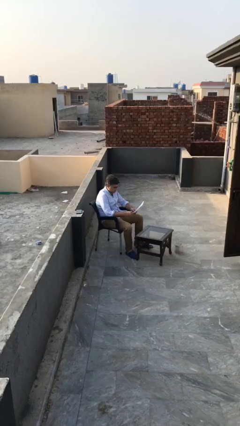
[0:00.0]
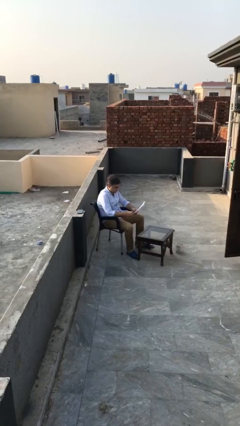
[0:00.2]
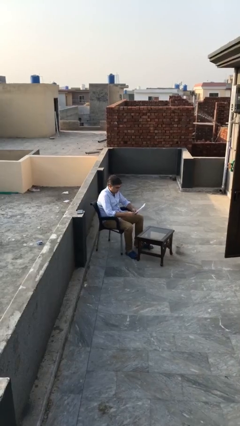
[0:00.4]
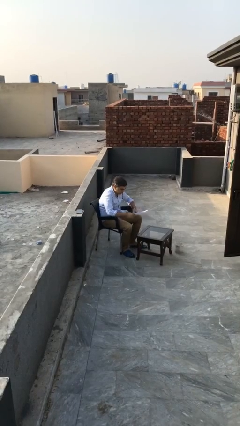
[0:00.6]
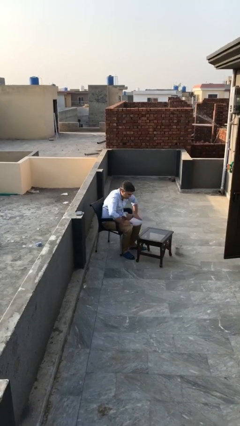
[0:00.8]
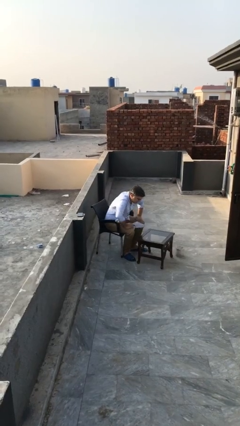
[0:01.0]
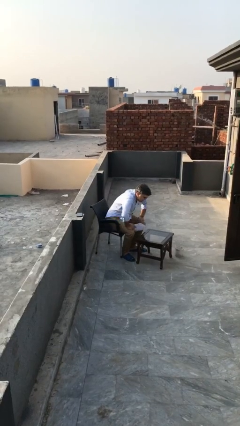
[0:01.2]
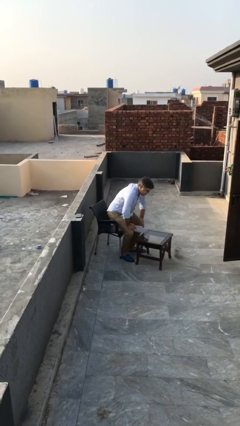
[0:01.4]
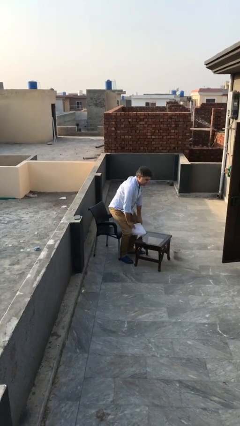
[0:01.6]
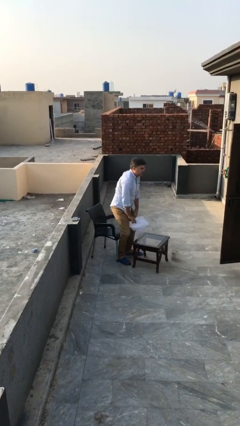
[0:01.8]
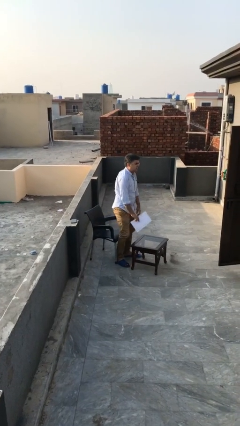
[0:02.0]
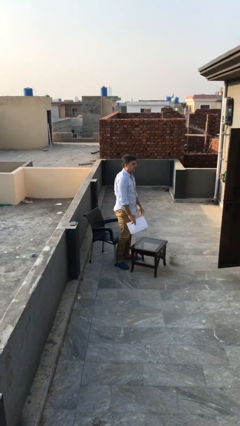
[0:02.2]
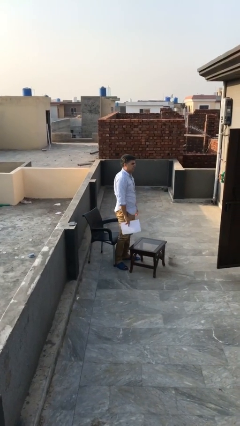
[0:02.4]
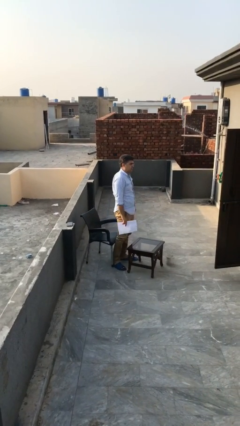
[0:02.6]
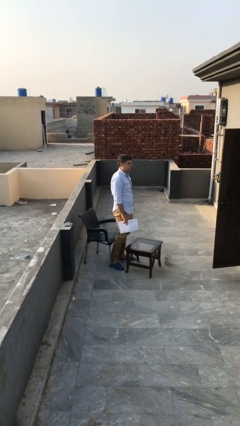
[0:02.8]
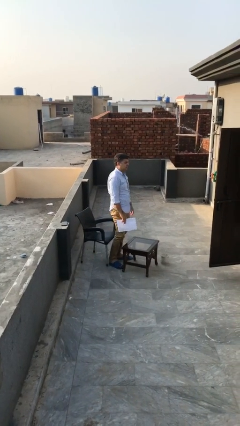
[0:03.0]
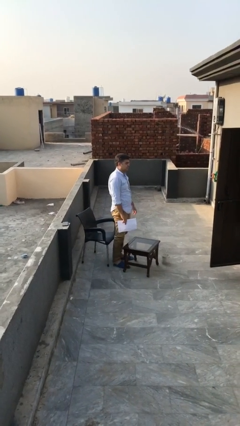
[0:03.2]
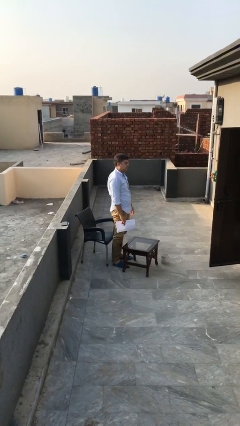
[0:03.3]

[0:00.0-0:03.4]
person stands up

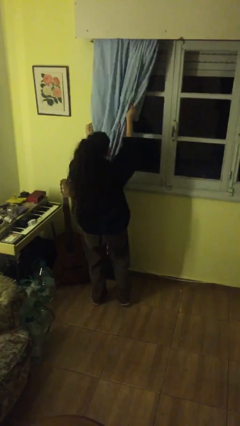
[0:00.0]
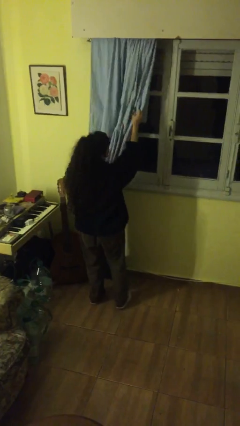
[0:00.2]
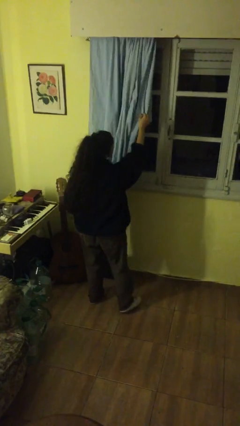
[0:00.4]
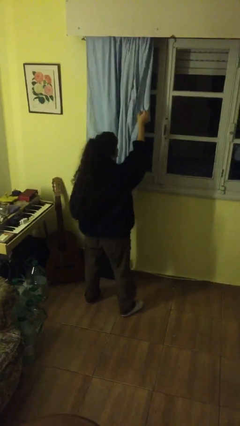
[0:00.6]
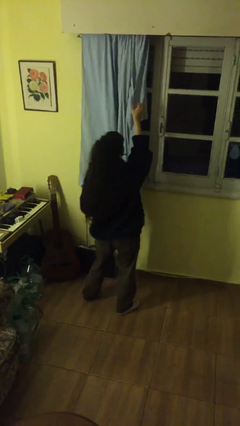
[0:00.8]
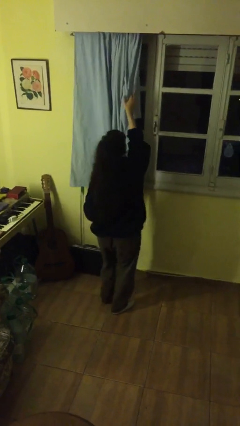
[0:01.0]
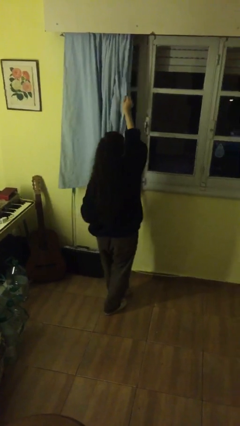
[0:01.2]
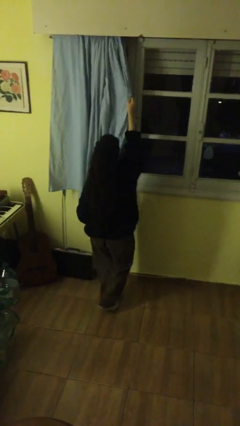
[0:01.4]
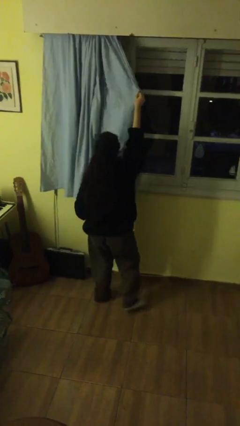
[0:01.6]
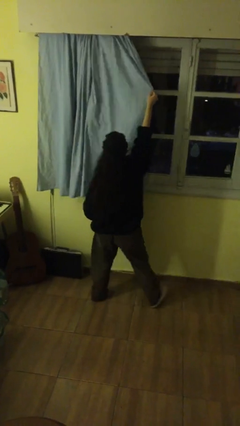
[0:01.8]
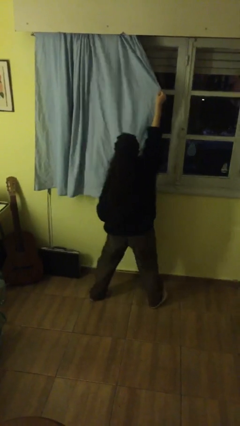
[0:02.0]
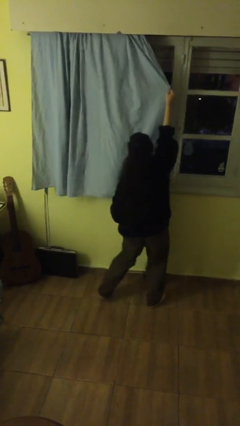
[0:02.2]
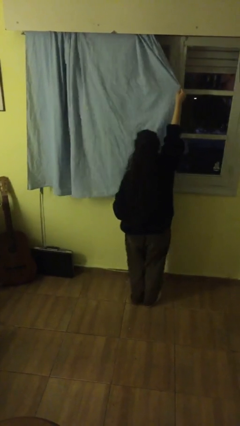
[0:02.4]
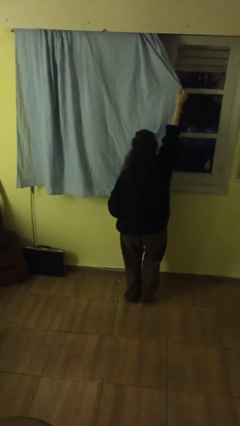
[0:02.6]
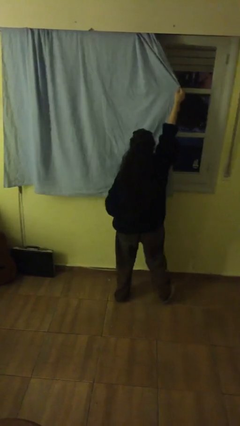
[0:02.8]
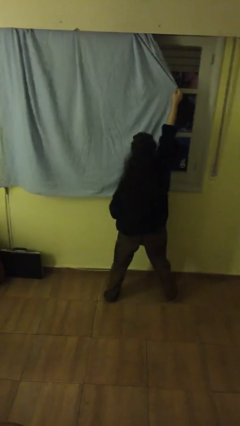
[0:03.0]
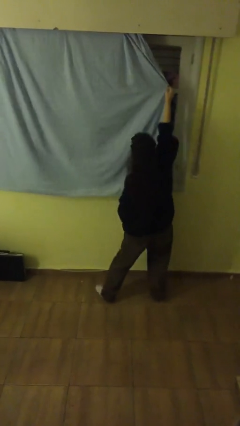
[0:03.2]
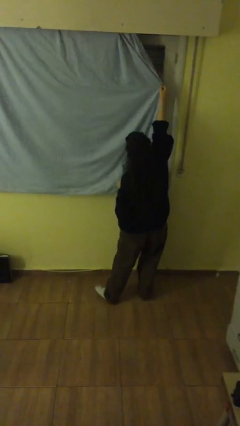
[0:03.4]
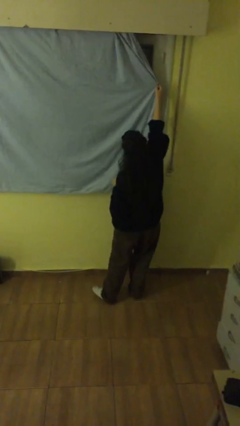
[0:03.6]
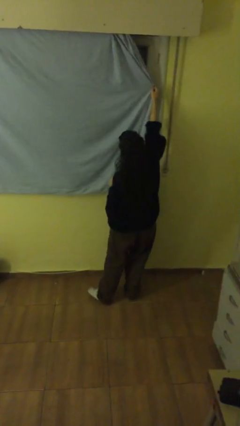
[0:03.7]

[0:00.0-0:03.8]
person closes curtains

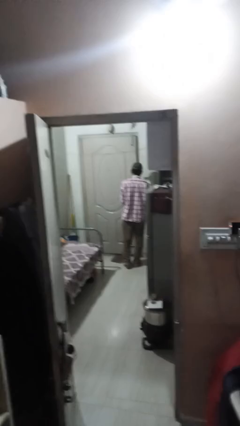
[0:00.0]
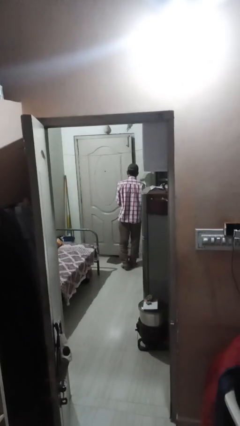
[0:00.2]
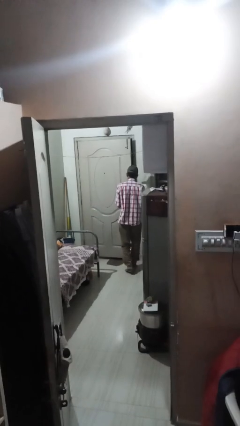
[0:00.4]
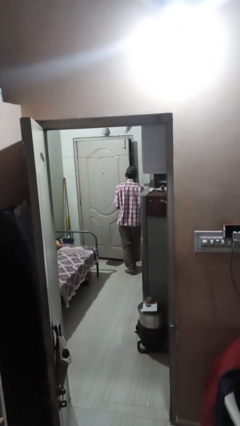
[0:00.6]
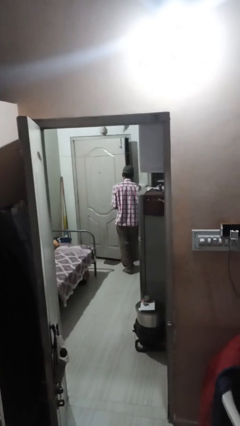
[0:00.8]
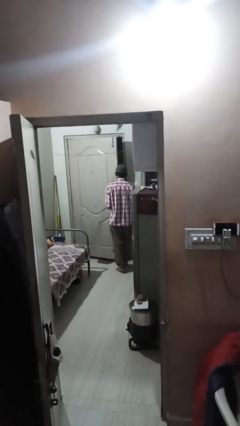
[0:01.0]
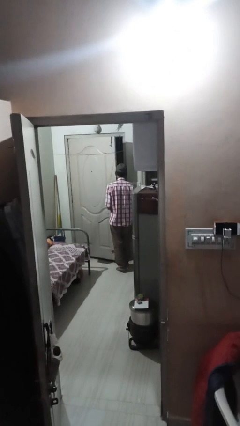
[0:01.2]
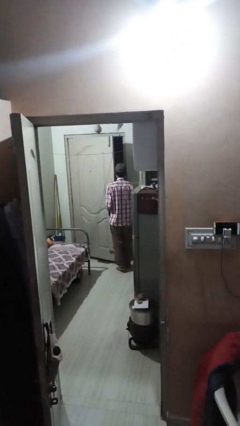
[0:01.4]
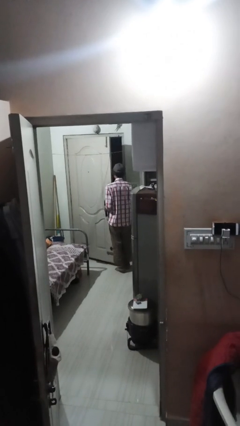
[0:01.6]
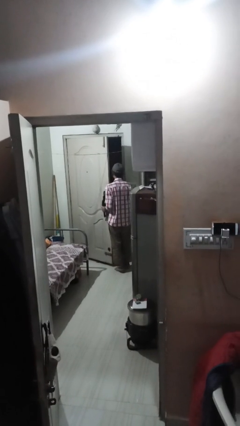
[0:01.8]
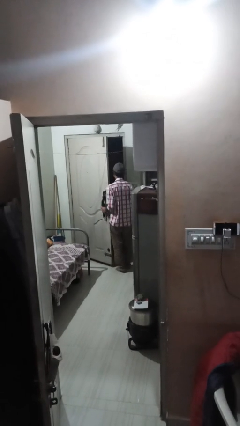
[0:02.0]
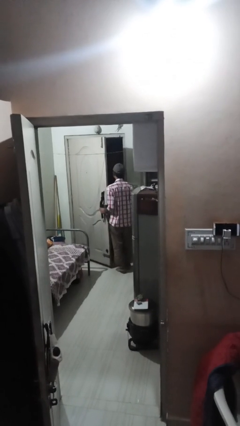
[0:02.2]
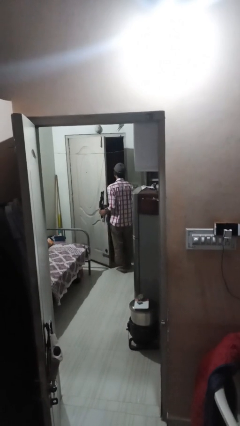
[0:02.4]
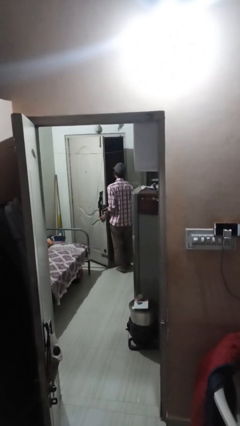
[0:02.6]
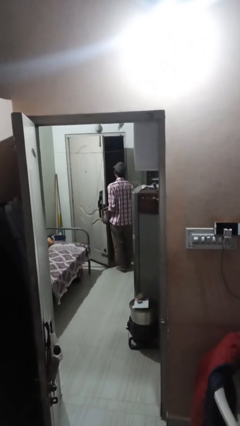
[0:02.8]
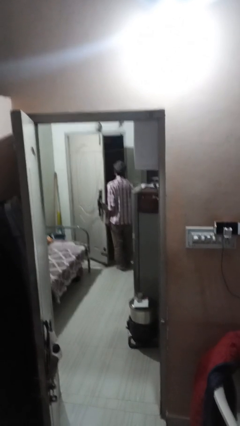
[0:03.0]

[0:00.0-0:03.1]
person opens facility door

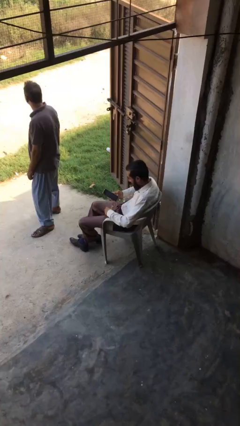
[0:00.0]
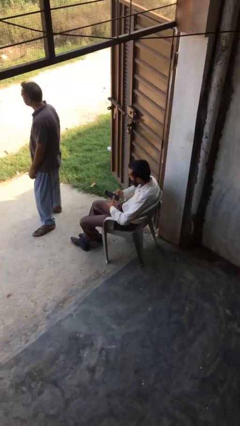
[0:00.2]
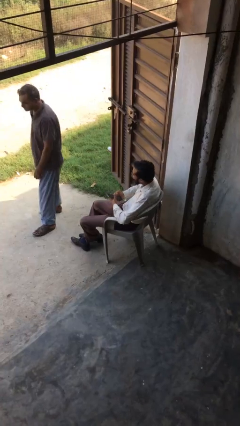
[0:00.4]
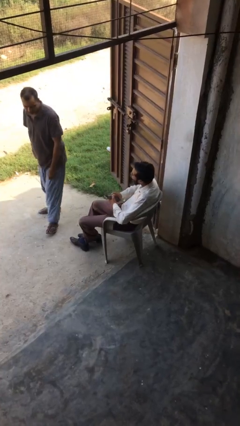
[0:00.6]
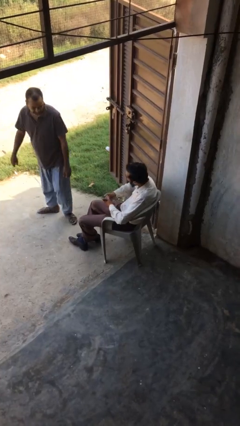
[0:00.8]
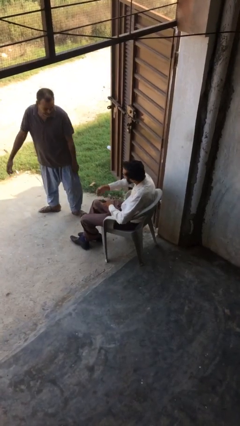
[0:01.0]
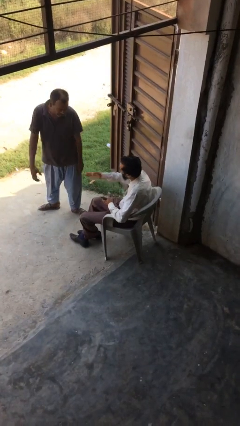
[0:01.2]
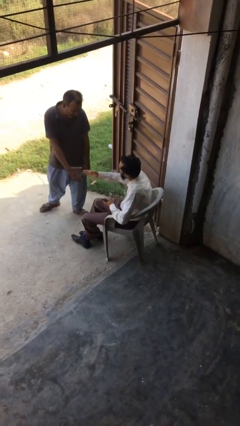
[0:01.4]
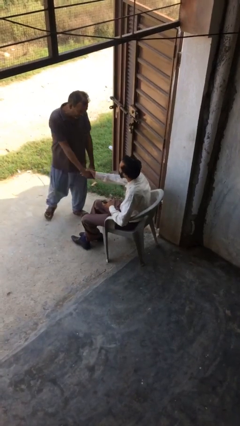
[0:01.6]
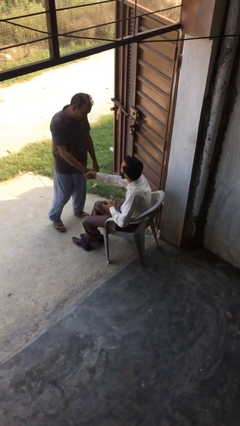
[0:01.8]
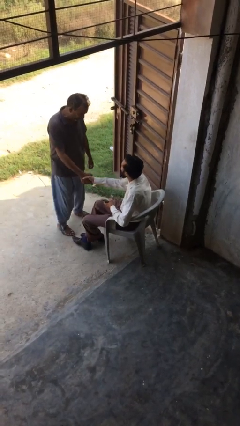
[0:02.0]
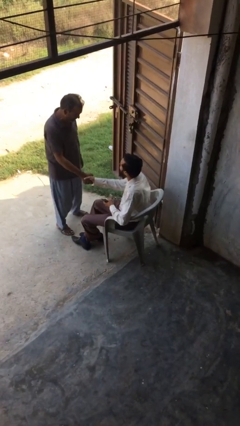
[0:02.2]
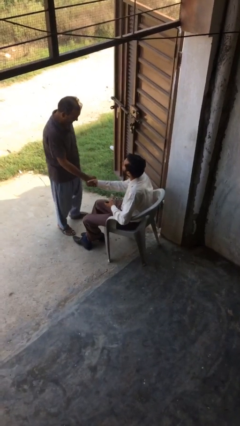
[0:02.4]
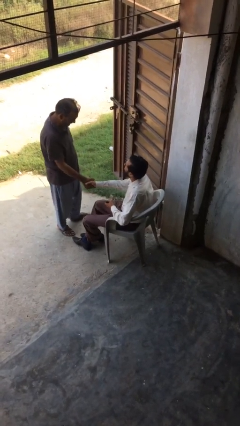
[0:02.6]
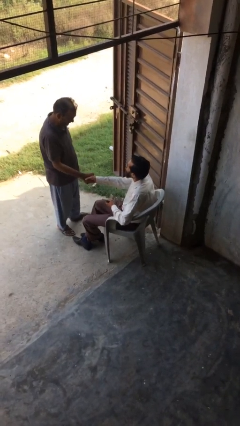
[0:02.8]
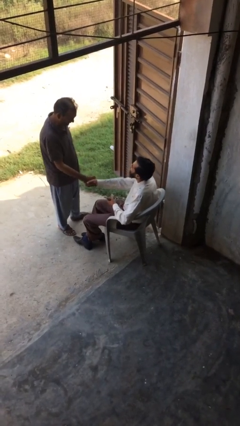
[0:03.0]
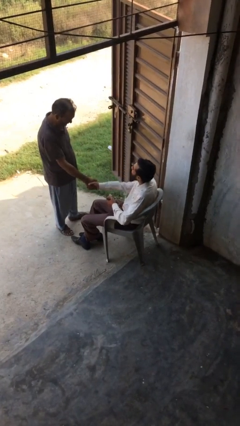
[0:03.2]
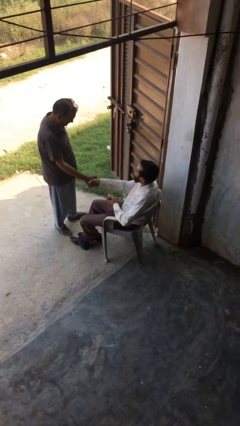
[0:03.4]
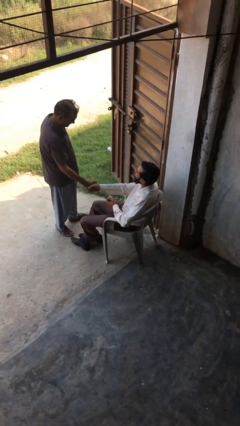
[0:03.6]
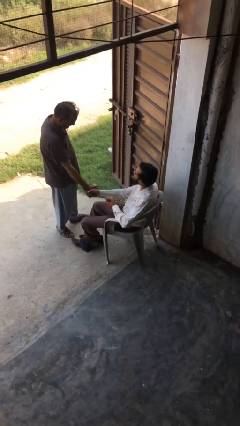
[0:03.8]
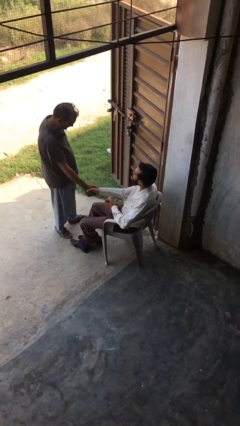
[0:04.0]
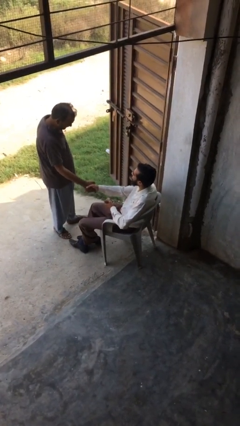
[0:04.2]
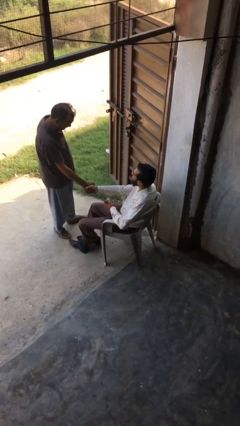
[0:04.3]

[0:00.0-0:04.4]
person shakes hand

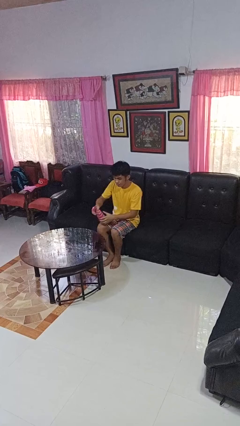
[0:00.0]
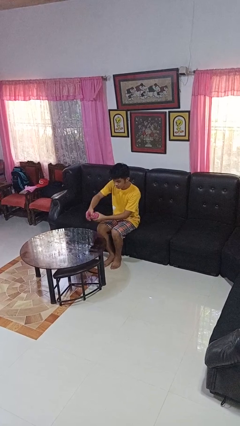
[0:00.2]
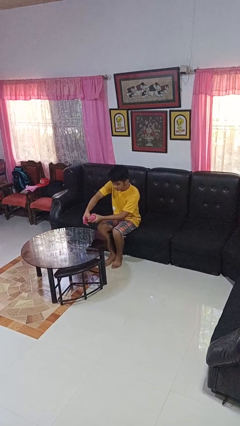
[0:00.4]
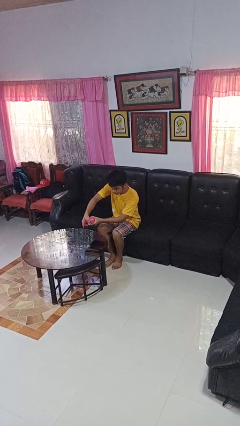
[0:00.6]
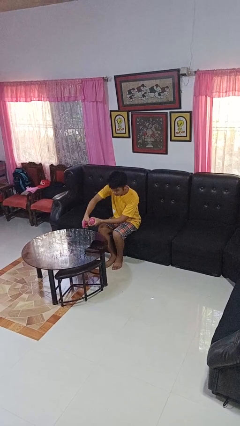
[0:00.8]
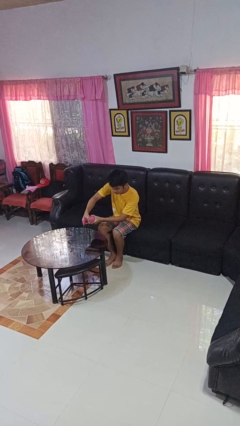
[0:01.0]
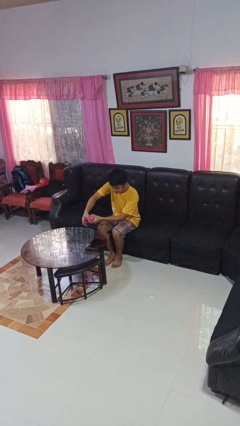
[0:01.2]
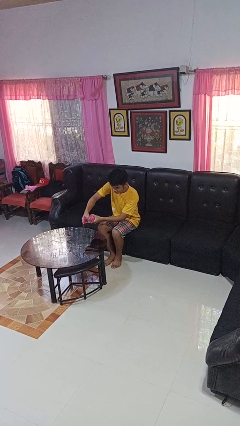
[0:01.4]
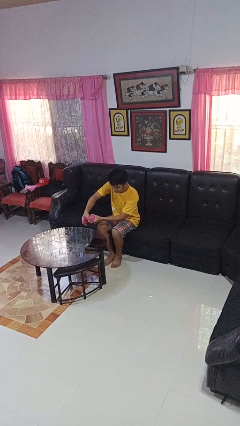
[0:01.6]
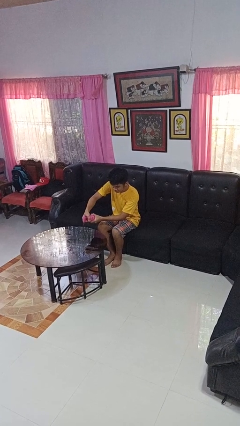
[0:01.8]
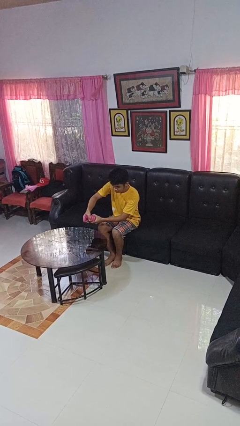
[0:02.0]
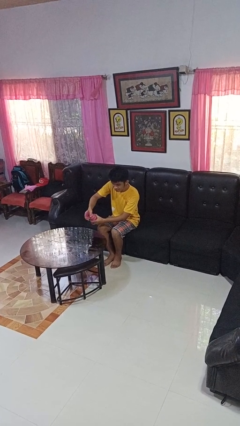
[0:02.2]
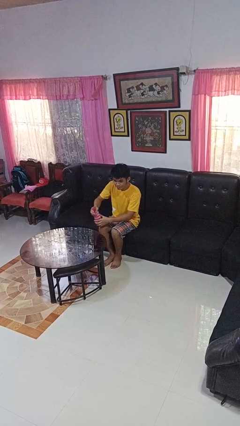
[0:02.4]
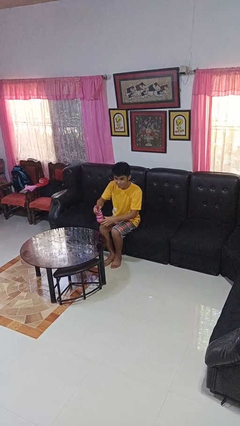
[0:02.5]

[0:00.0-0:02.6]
person sprays from bottle

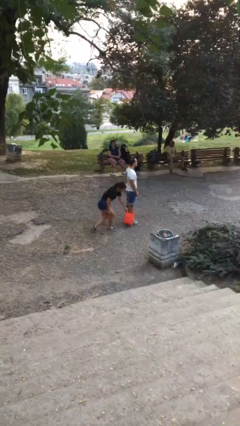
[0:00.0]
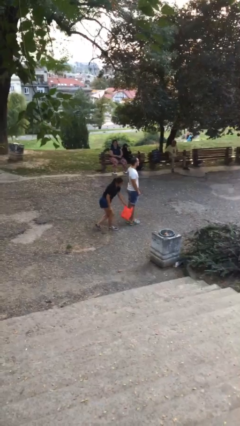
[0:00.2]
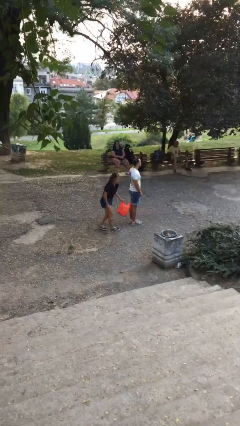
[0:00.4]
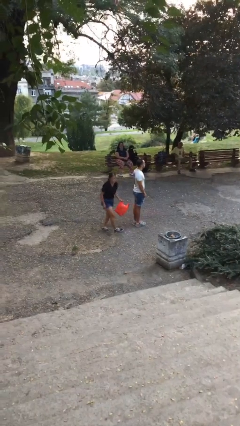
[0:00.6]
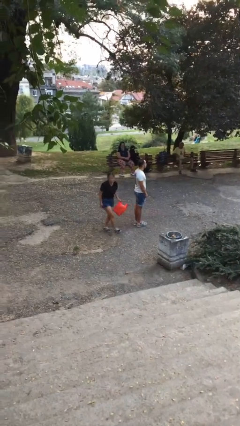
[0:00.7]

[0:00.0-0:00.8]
person steals object from person
